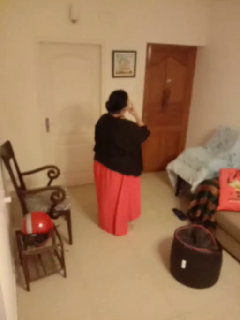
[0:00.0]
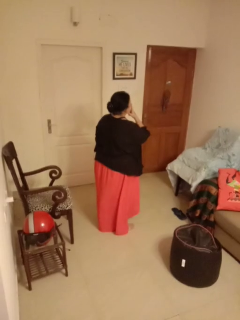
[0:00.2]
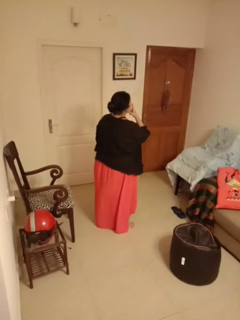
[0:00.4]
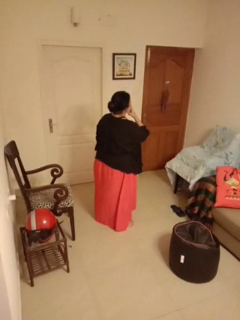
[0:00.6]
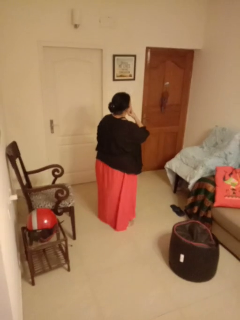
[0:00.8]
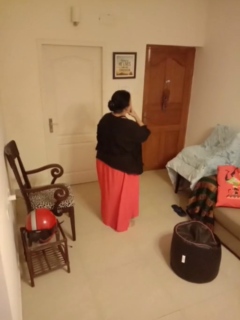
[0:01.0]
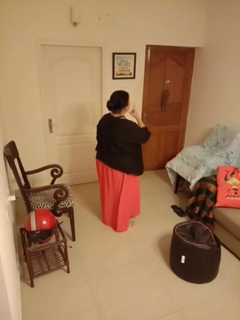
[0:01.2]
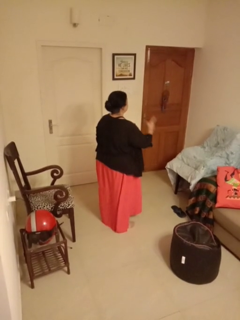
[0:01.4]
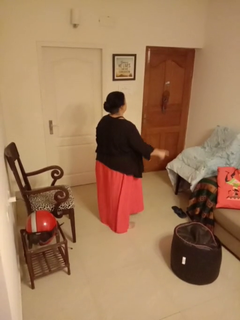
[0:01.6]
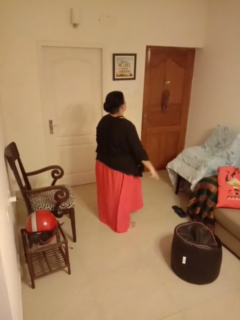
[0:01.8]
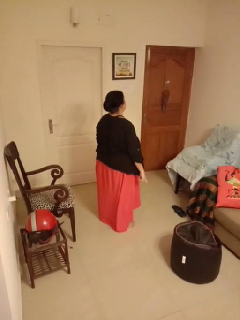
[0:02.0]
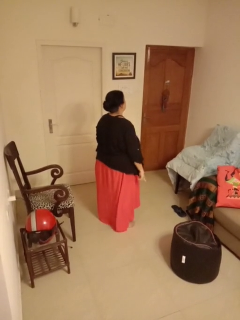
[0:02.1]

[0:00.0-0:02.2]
person gestures be quiet

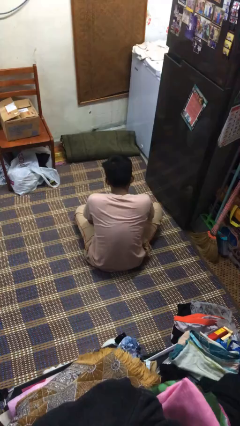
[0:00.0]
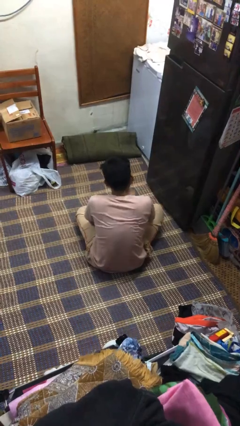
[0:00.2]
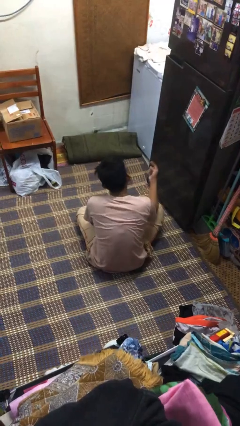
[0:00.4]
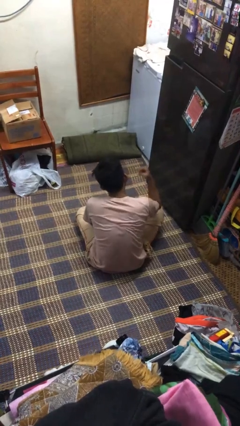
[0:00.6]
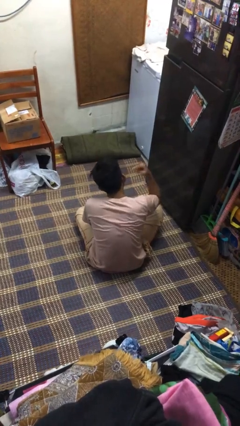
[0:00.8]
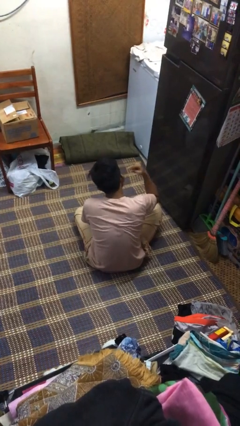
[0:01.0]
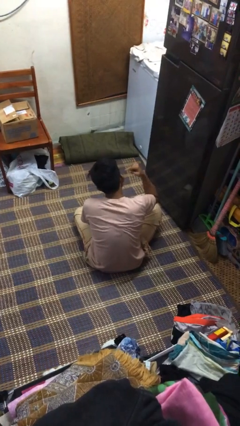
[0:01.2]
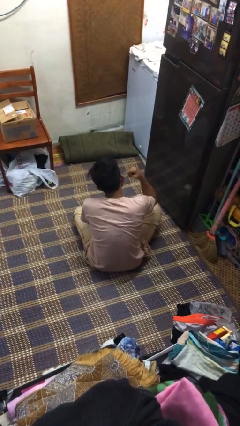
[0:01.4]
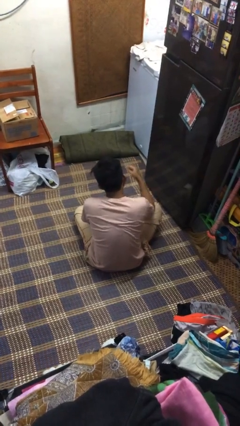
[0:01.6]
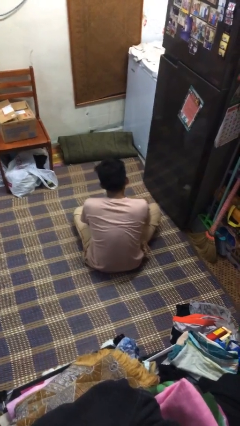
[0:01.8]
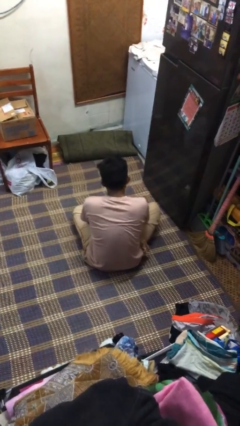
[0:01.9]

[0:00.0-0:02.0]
person gestures listen closely

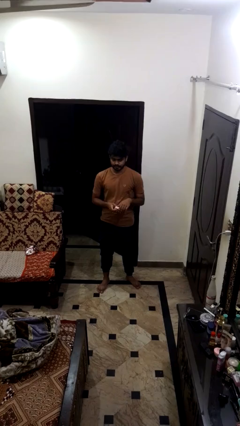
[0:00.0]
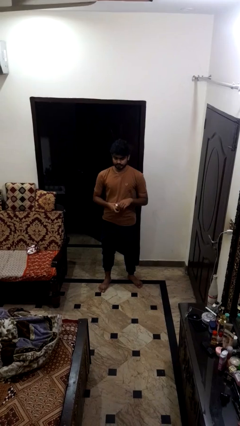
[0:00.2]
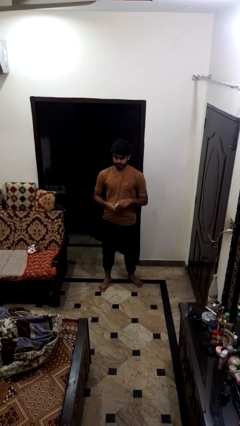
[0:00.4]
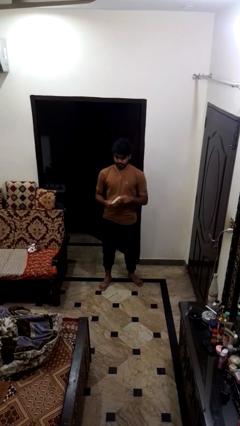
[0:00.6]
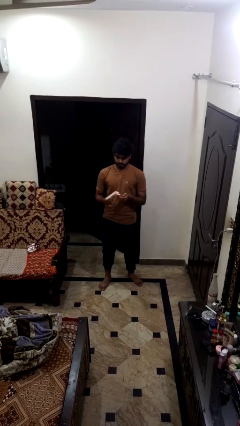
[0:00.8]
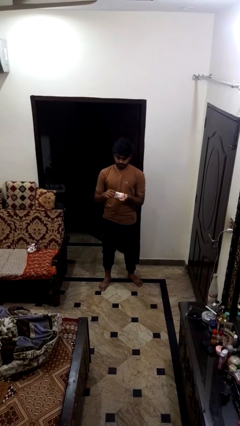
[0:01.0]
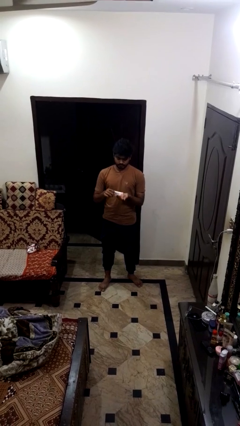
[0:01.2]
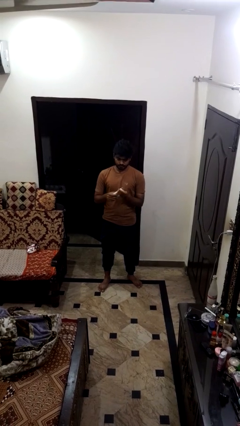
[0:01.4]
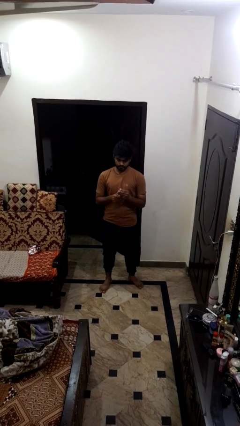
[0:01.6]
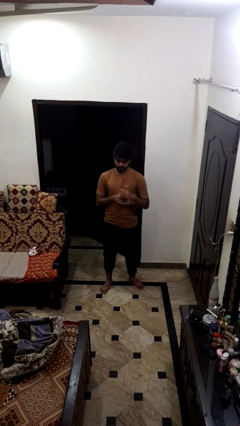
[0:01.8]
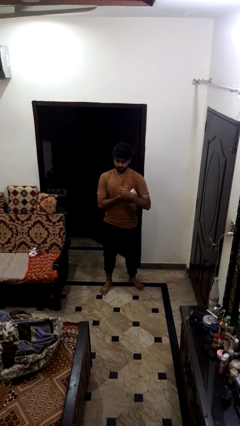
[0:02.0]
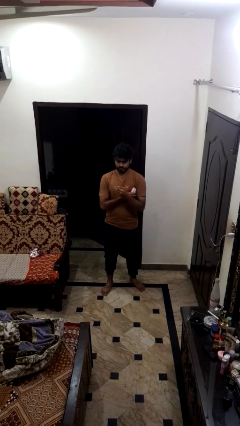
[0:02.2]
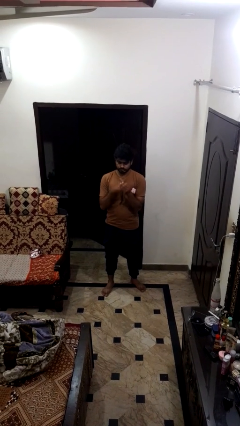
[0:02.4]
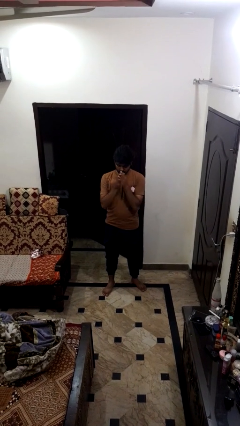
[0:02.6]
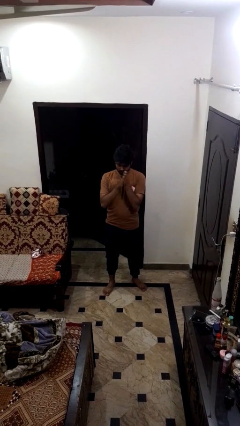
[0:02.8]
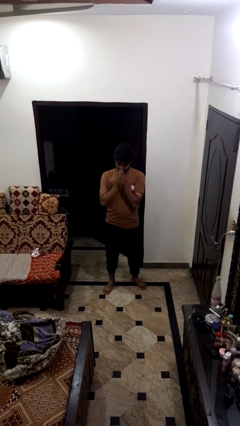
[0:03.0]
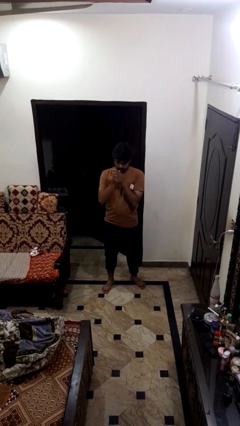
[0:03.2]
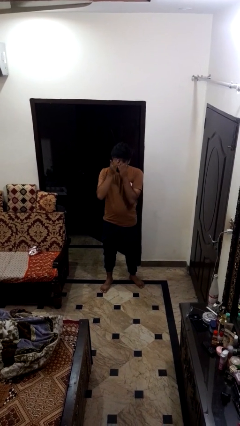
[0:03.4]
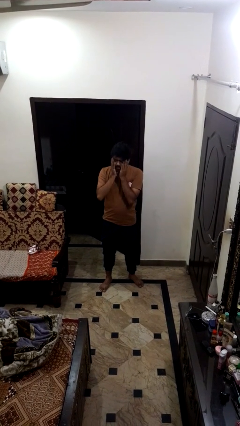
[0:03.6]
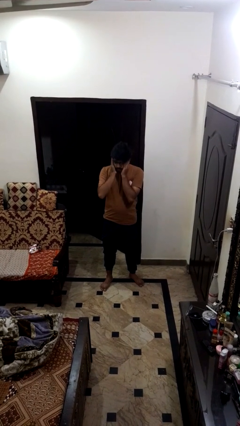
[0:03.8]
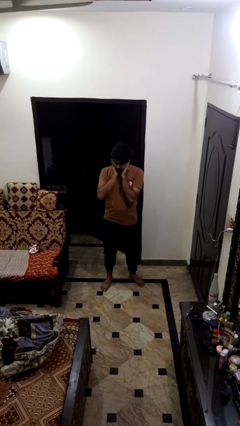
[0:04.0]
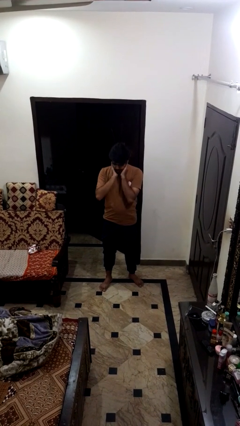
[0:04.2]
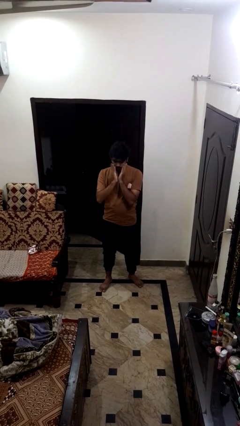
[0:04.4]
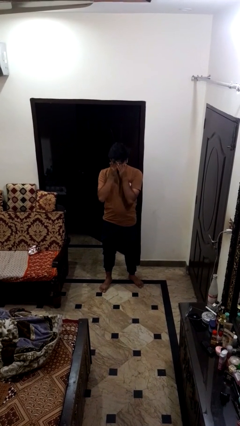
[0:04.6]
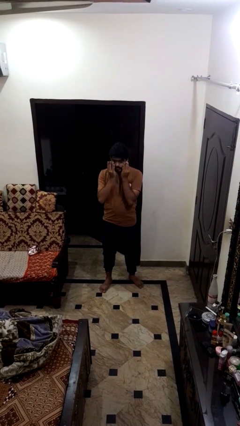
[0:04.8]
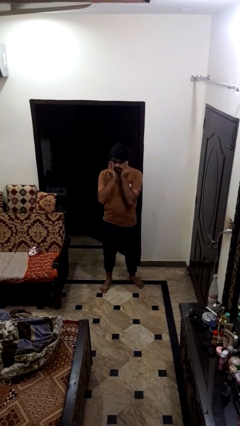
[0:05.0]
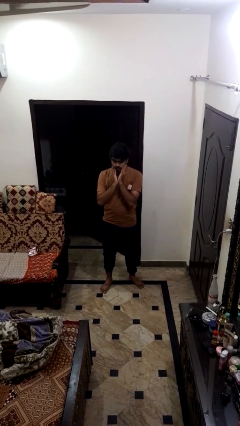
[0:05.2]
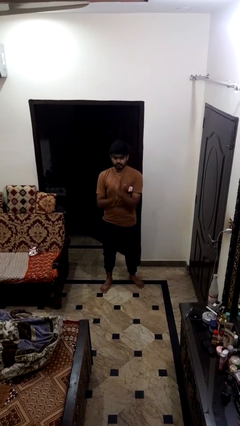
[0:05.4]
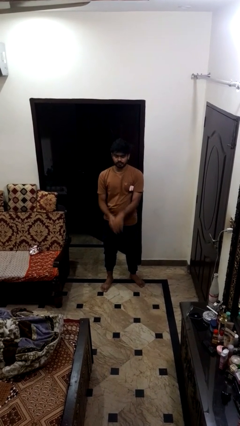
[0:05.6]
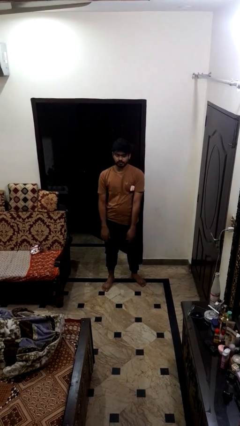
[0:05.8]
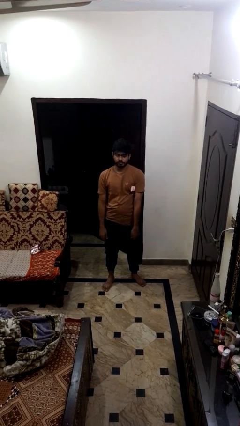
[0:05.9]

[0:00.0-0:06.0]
person applies facial moisturizer

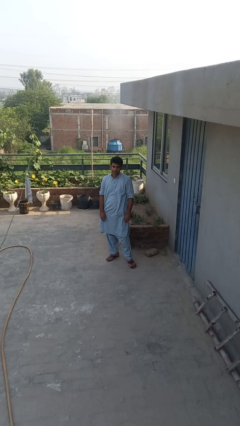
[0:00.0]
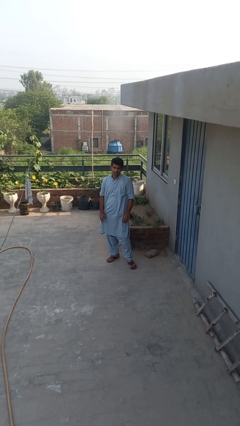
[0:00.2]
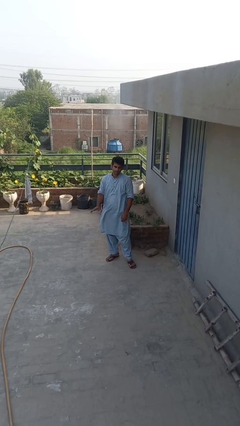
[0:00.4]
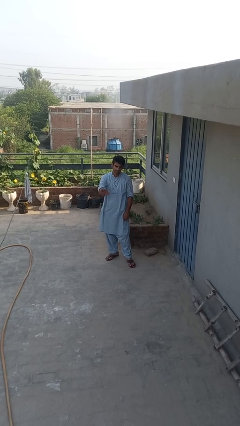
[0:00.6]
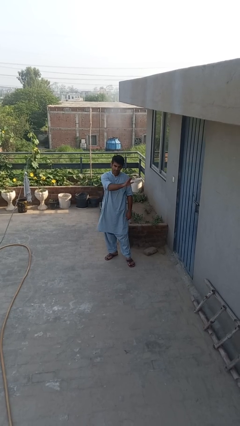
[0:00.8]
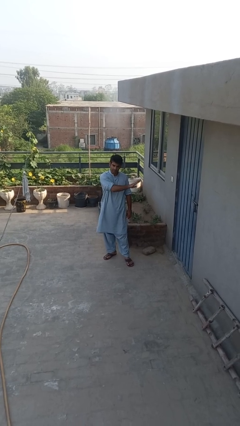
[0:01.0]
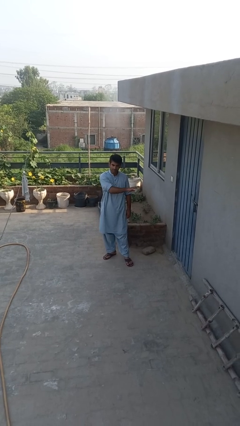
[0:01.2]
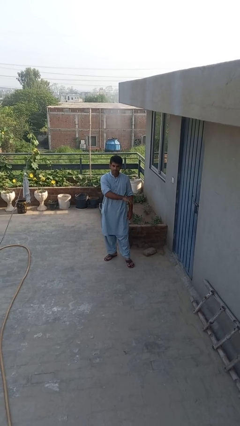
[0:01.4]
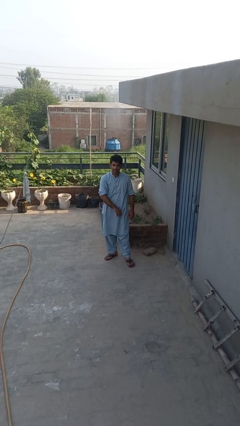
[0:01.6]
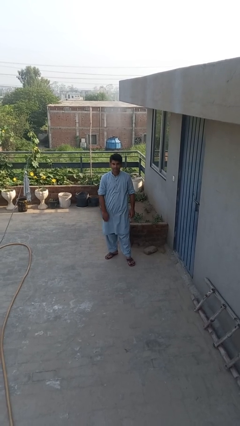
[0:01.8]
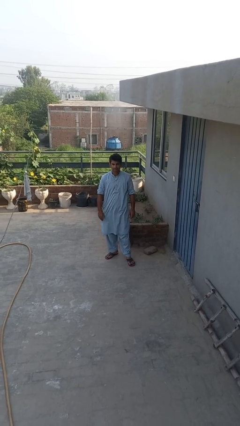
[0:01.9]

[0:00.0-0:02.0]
person gestures swipe left

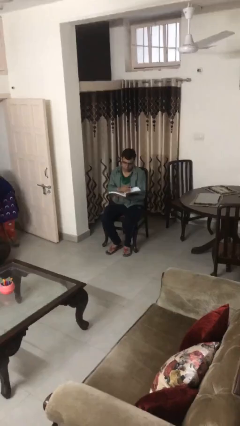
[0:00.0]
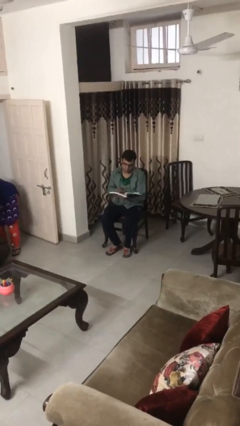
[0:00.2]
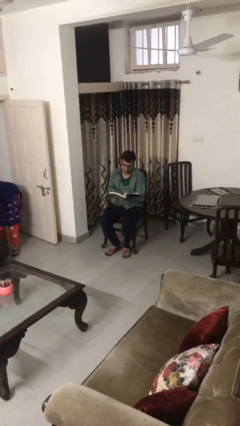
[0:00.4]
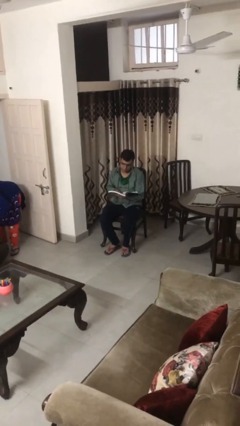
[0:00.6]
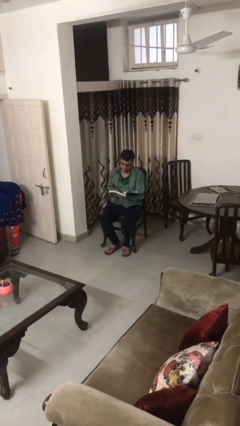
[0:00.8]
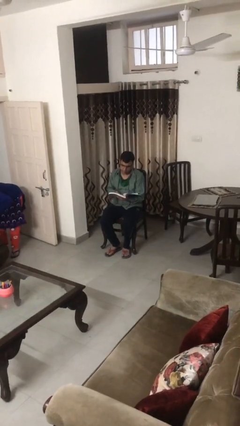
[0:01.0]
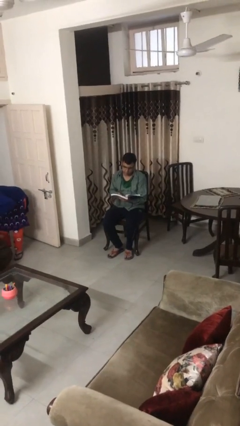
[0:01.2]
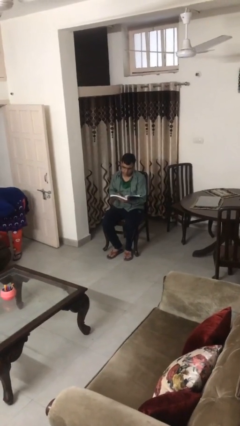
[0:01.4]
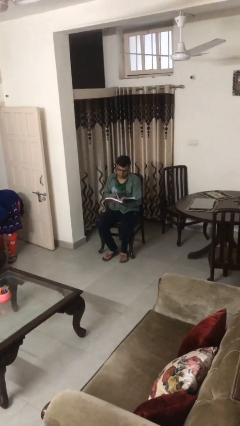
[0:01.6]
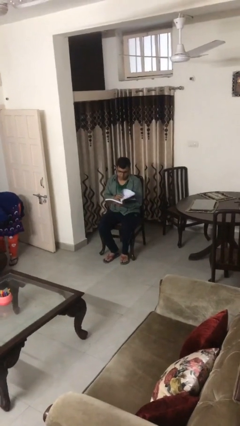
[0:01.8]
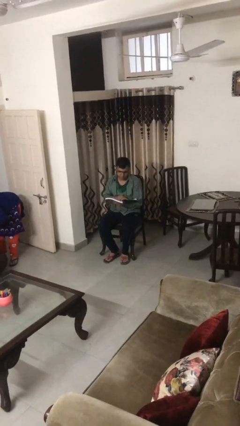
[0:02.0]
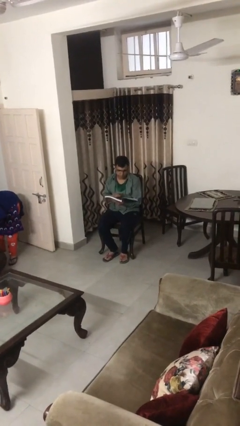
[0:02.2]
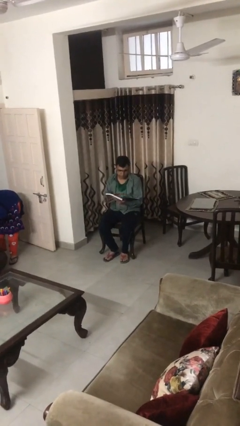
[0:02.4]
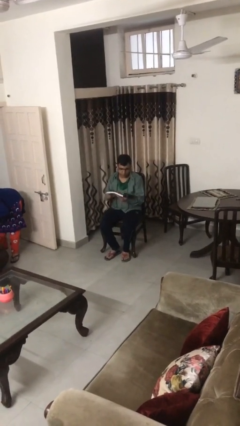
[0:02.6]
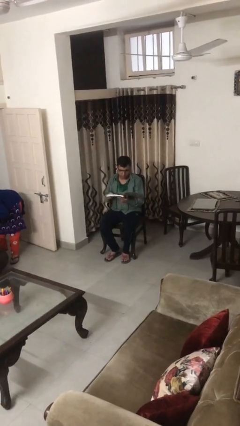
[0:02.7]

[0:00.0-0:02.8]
person reads document

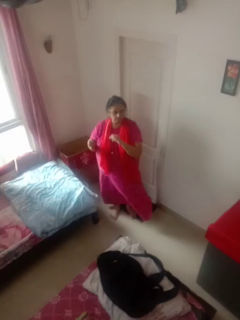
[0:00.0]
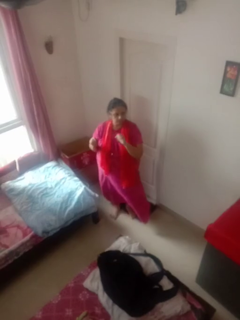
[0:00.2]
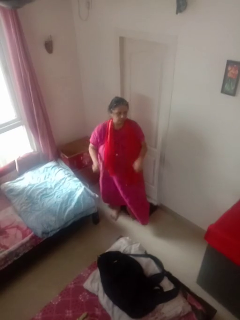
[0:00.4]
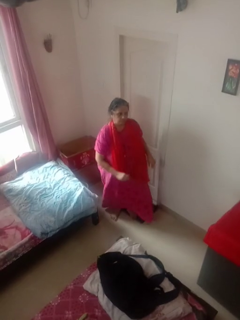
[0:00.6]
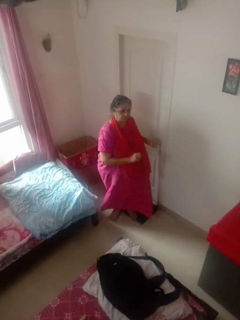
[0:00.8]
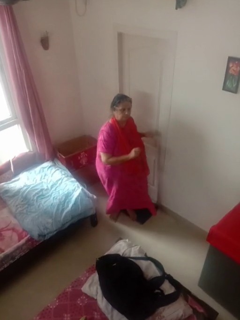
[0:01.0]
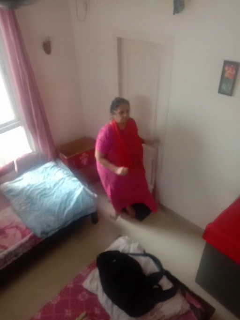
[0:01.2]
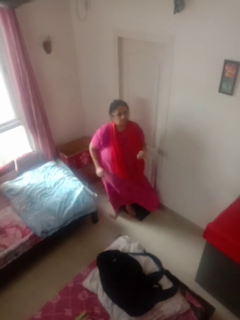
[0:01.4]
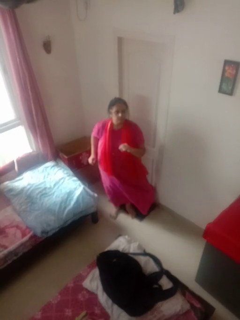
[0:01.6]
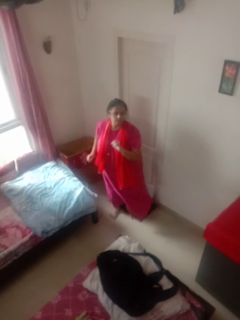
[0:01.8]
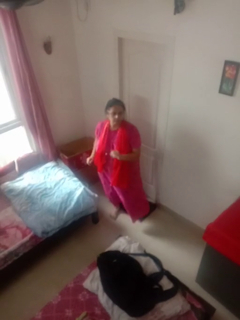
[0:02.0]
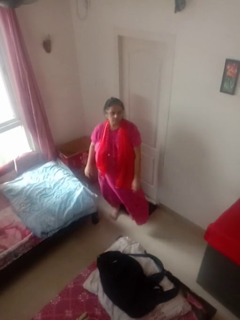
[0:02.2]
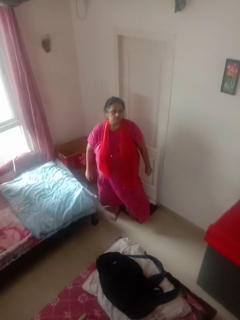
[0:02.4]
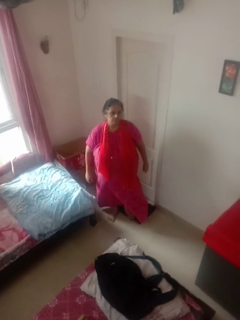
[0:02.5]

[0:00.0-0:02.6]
person dances in place

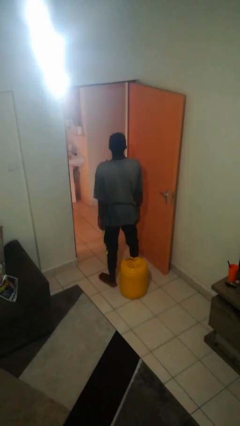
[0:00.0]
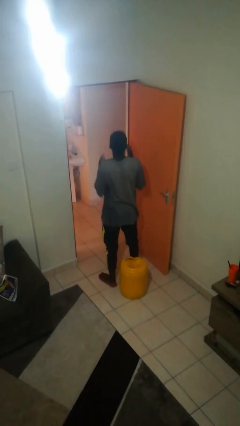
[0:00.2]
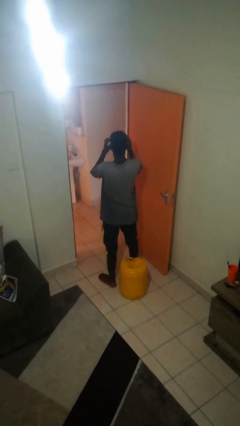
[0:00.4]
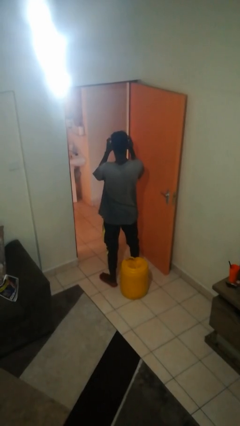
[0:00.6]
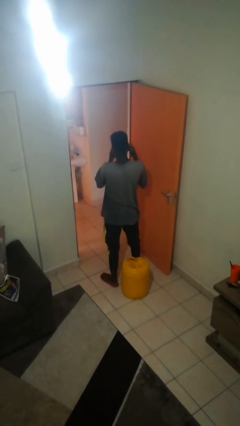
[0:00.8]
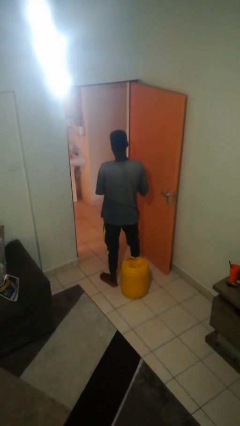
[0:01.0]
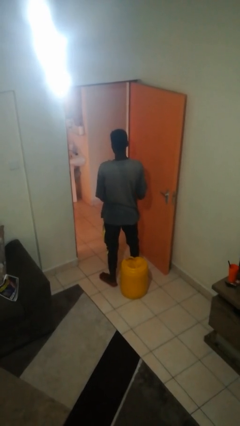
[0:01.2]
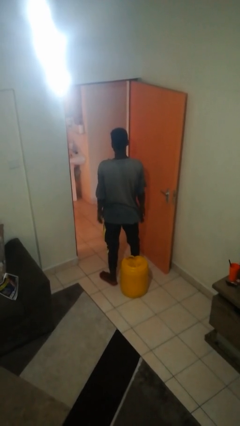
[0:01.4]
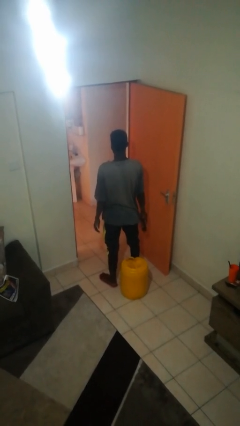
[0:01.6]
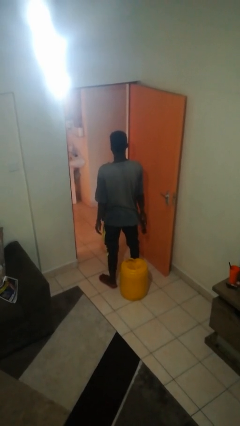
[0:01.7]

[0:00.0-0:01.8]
person takes off sunglasses
